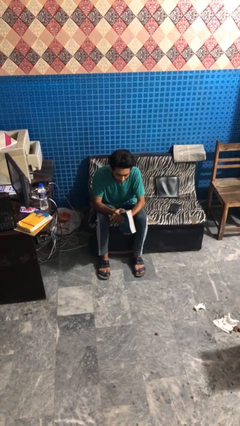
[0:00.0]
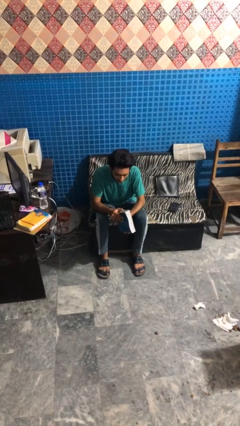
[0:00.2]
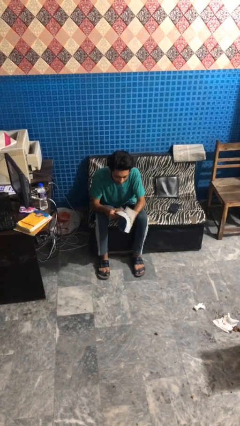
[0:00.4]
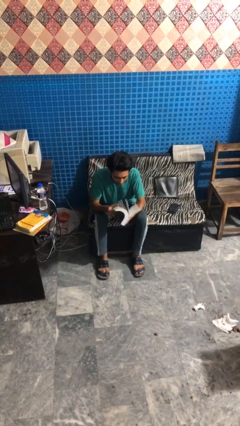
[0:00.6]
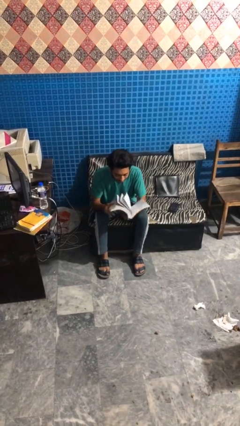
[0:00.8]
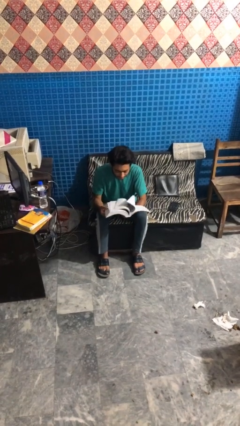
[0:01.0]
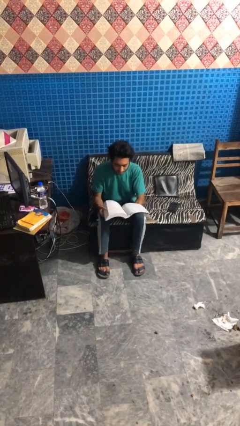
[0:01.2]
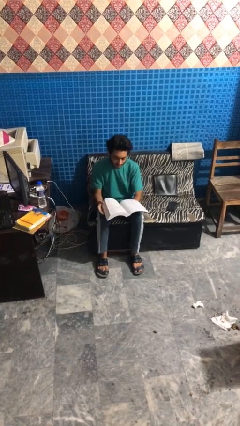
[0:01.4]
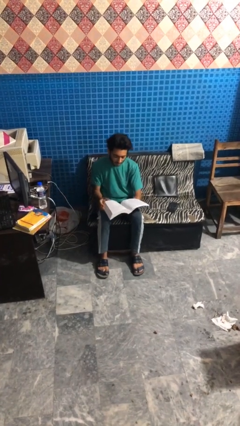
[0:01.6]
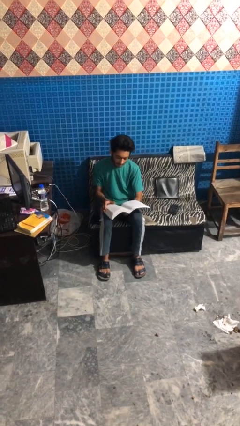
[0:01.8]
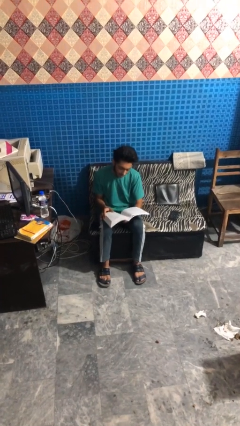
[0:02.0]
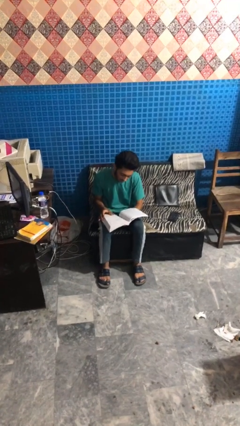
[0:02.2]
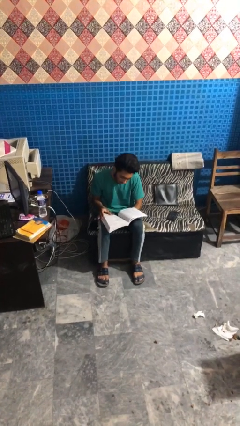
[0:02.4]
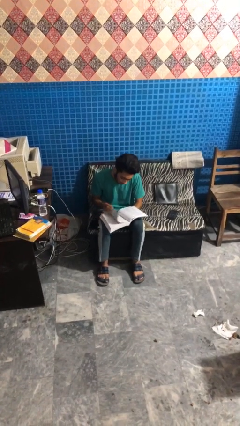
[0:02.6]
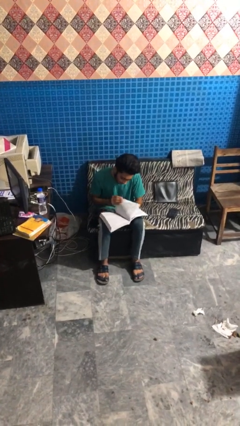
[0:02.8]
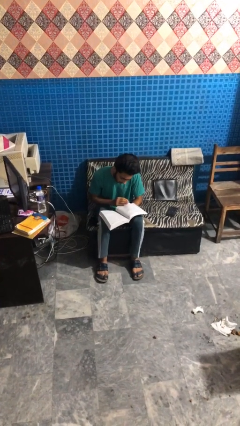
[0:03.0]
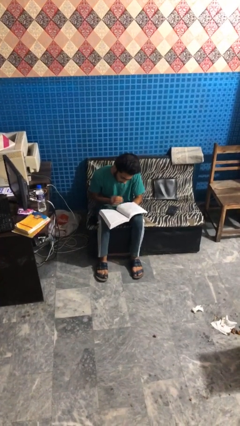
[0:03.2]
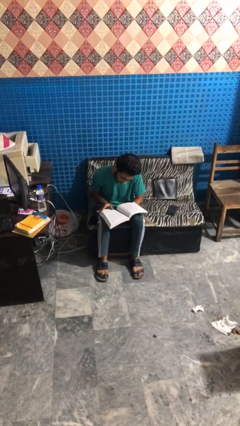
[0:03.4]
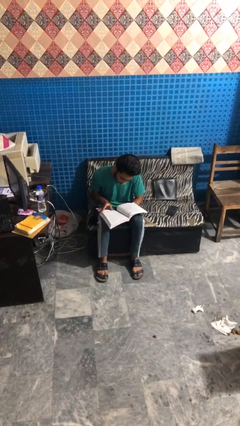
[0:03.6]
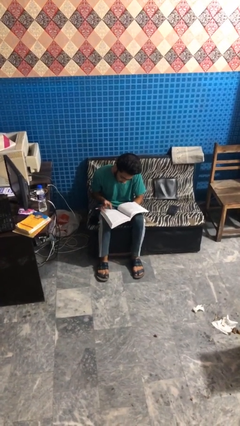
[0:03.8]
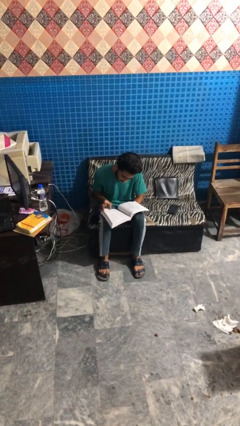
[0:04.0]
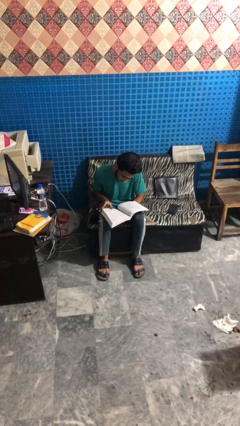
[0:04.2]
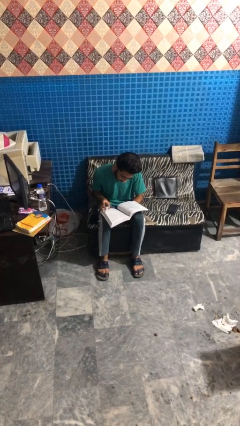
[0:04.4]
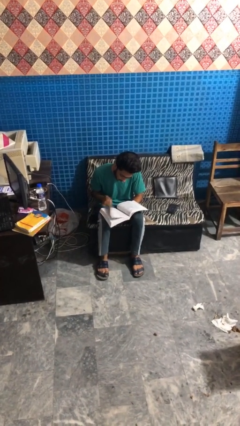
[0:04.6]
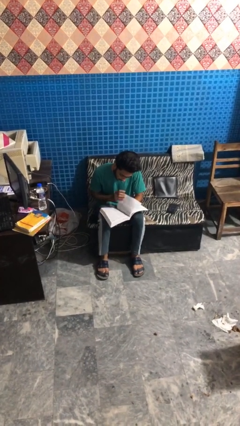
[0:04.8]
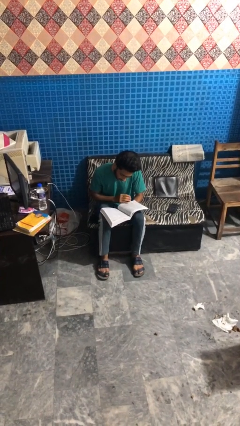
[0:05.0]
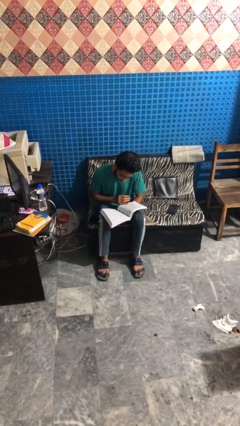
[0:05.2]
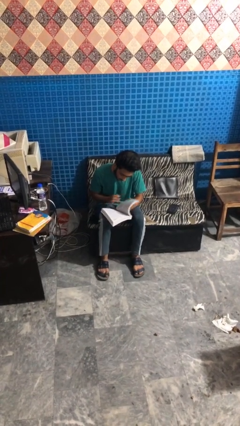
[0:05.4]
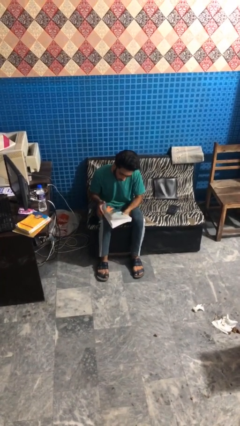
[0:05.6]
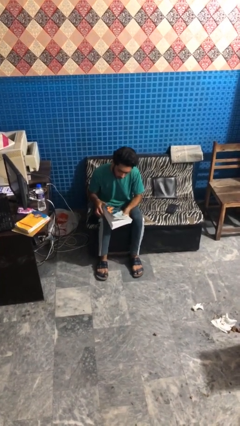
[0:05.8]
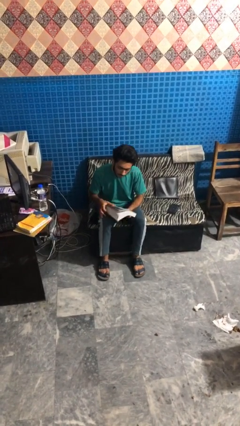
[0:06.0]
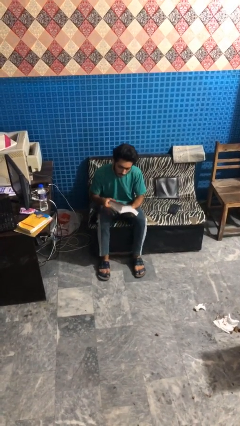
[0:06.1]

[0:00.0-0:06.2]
person reads book

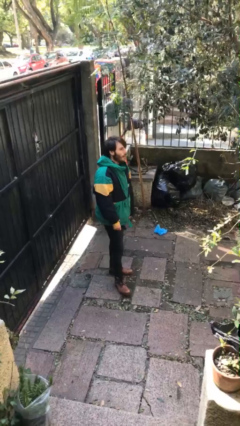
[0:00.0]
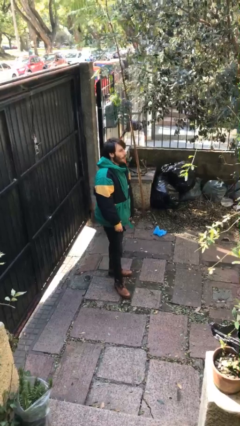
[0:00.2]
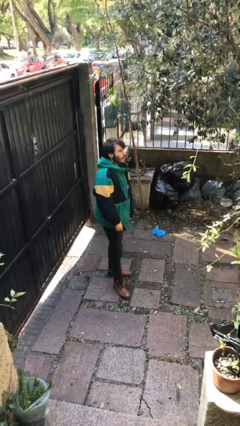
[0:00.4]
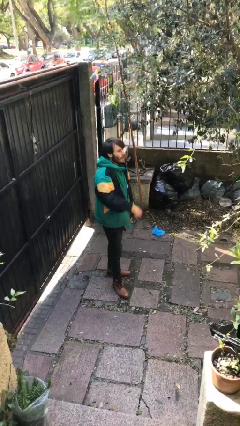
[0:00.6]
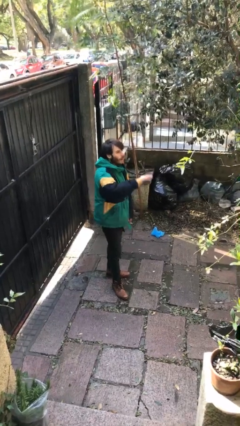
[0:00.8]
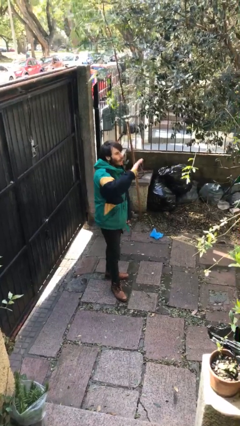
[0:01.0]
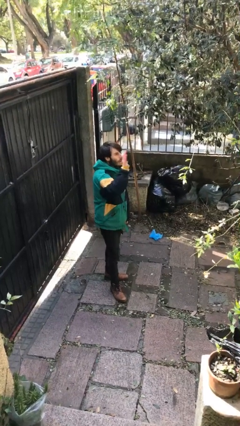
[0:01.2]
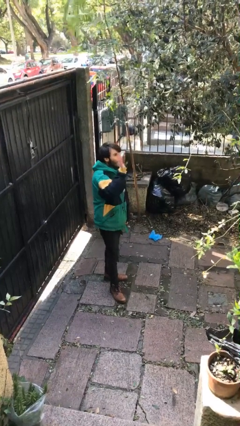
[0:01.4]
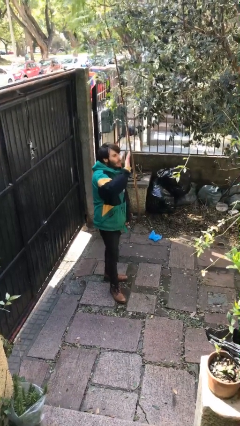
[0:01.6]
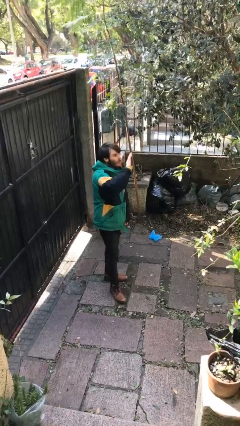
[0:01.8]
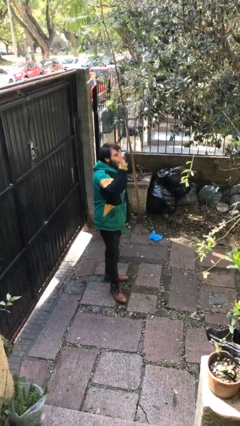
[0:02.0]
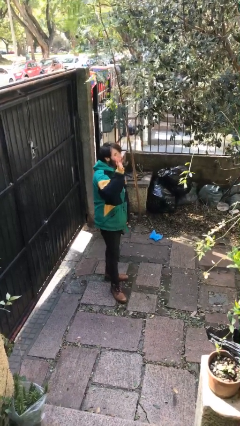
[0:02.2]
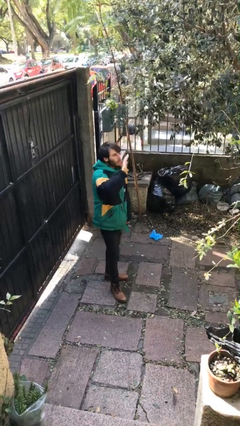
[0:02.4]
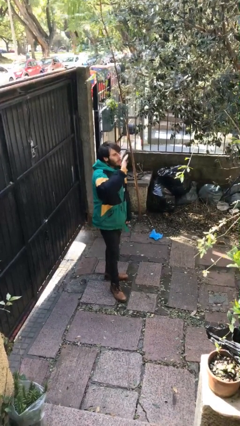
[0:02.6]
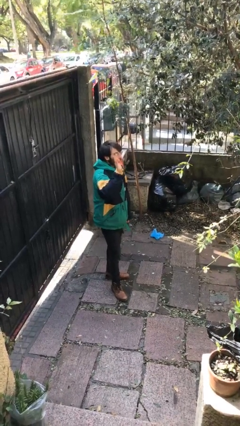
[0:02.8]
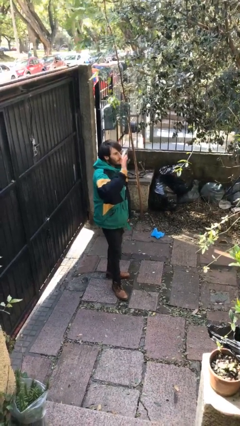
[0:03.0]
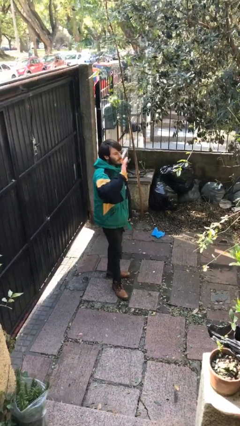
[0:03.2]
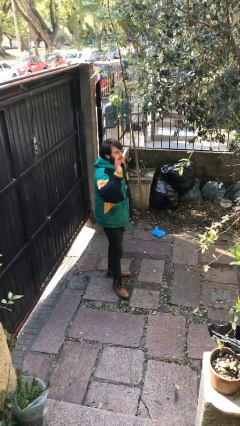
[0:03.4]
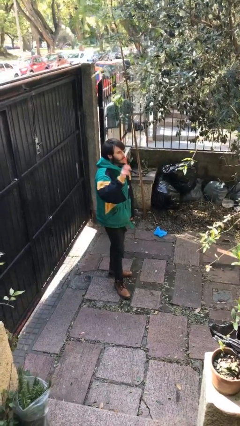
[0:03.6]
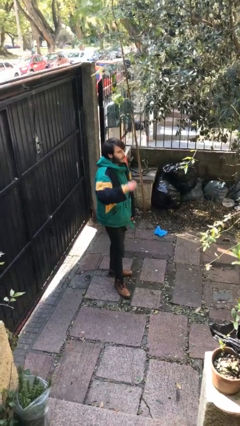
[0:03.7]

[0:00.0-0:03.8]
person waves at person

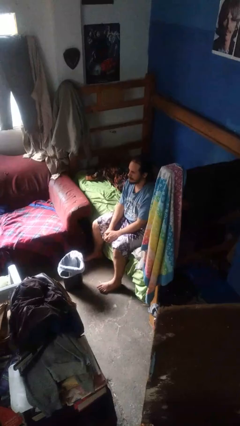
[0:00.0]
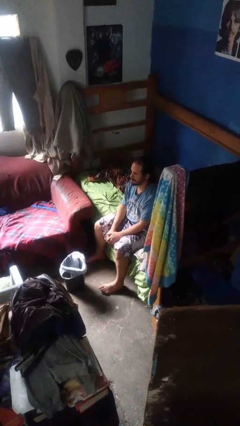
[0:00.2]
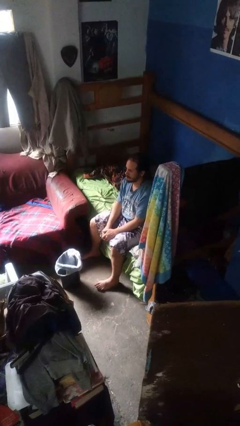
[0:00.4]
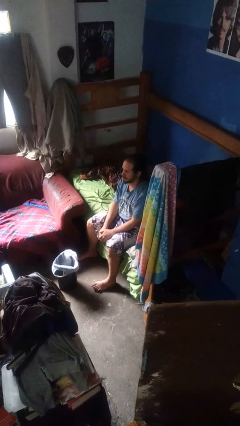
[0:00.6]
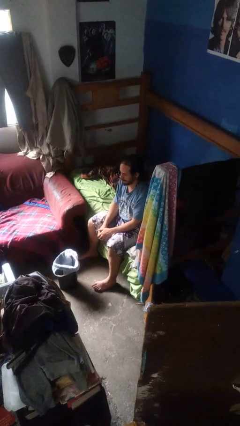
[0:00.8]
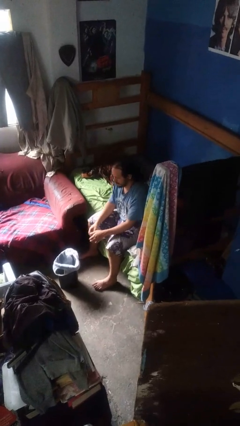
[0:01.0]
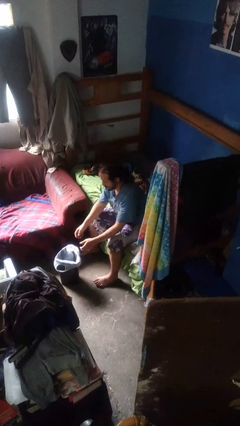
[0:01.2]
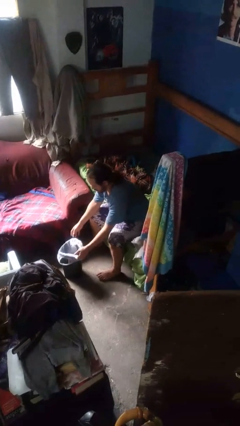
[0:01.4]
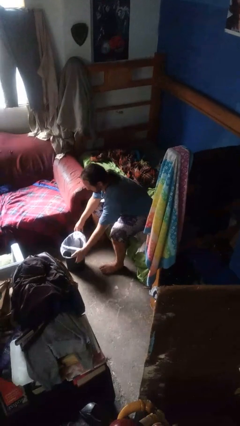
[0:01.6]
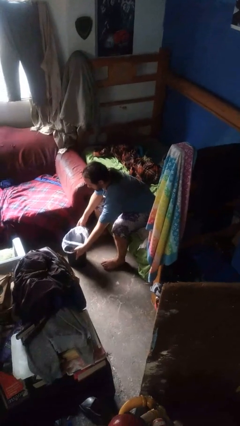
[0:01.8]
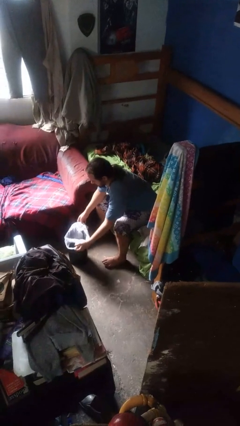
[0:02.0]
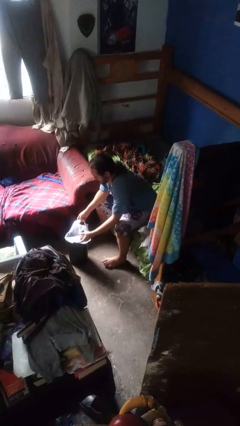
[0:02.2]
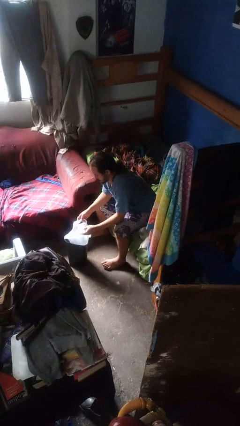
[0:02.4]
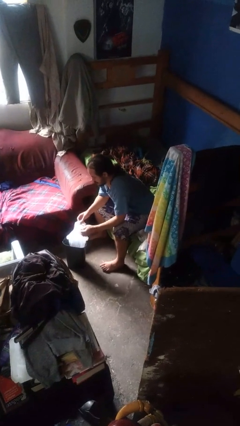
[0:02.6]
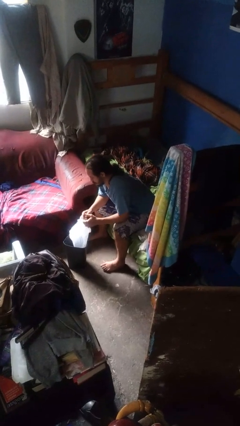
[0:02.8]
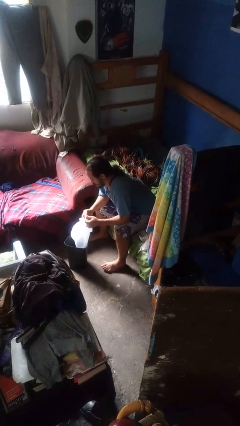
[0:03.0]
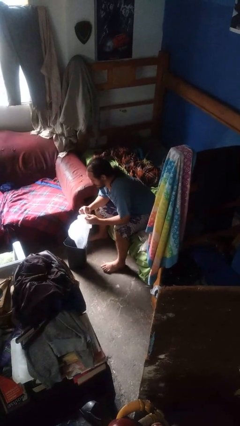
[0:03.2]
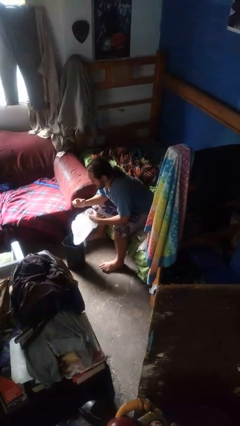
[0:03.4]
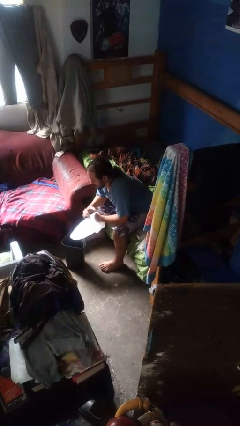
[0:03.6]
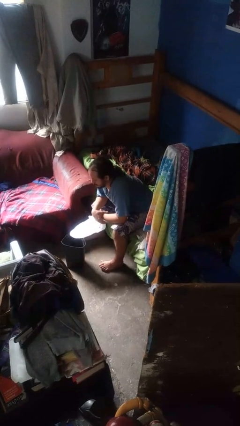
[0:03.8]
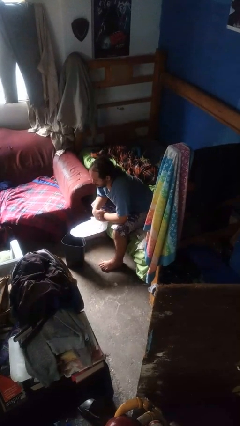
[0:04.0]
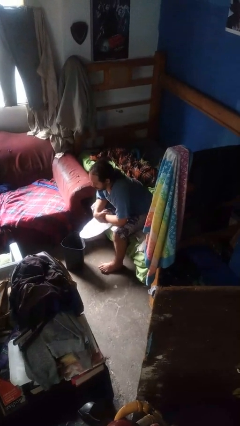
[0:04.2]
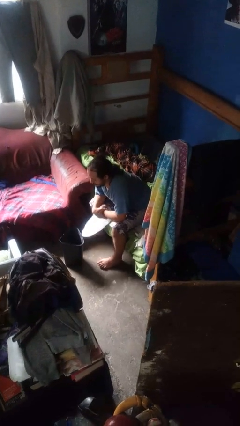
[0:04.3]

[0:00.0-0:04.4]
person removes trashbag from trashcan

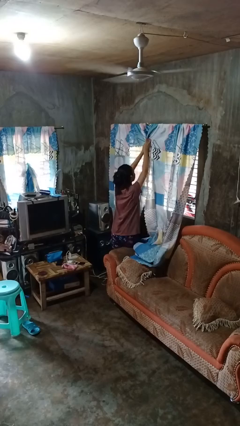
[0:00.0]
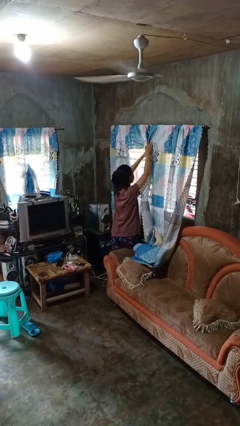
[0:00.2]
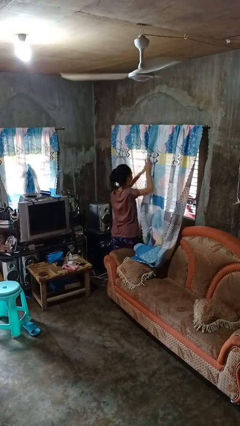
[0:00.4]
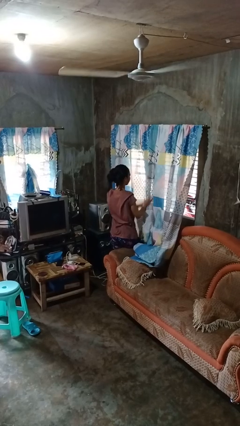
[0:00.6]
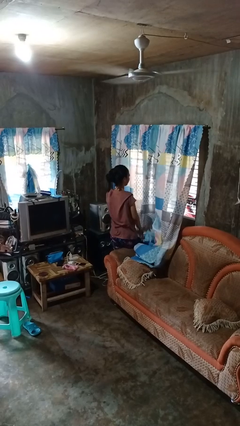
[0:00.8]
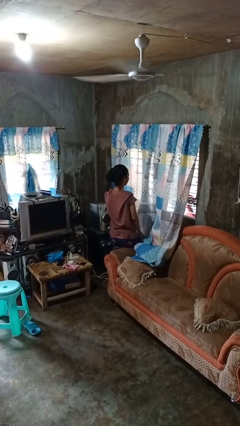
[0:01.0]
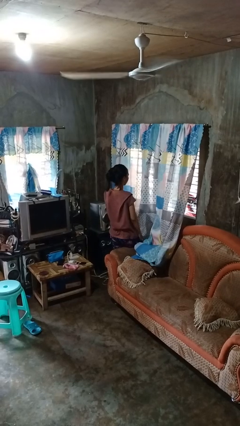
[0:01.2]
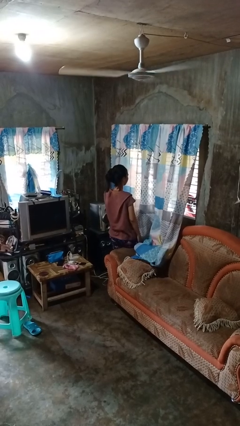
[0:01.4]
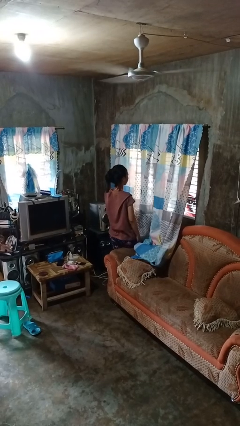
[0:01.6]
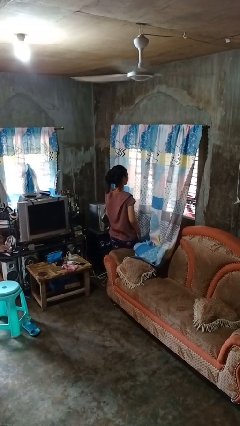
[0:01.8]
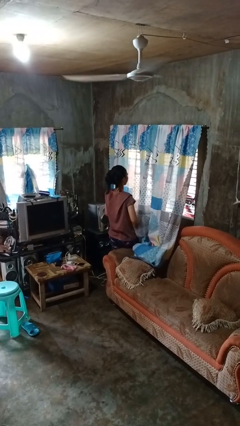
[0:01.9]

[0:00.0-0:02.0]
person closes curtains

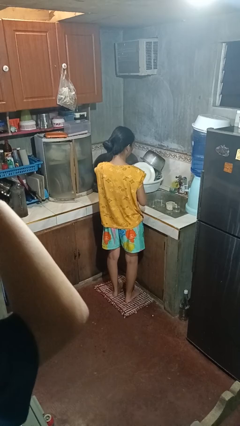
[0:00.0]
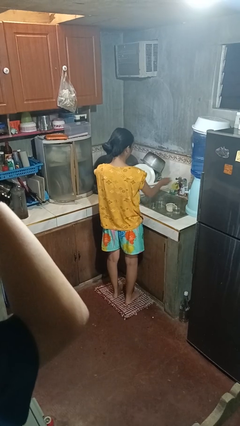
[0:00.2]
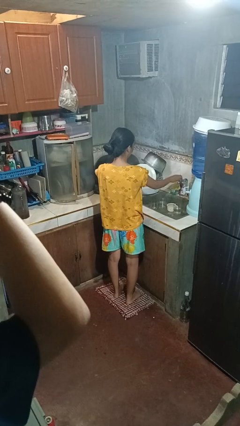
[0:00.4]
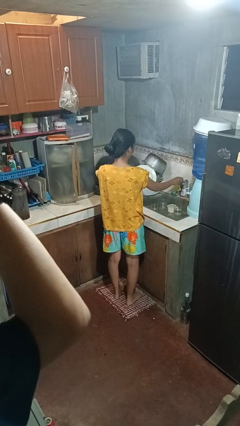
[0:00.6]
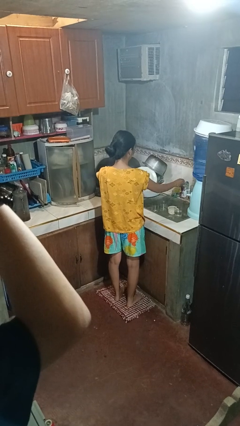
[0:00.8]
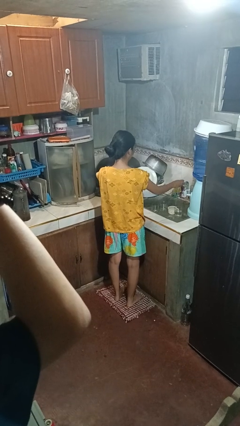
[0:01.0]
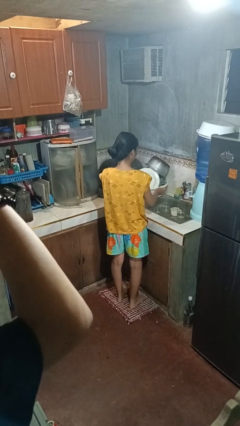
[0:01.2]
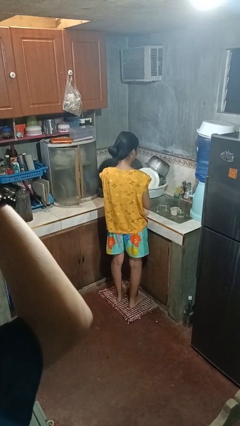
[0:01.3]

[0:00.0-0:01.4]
person turns on faucet

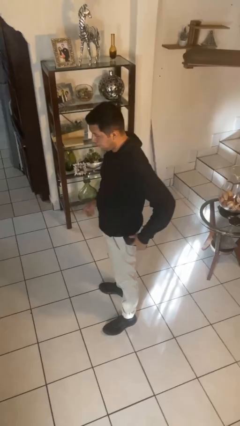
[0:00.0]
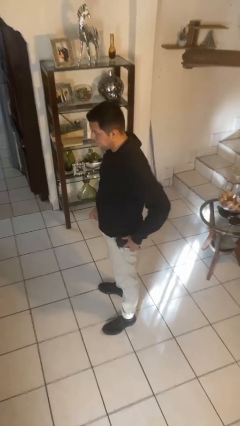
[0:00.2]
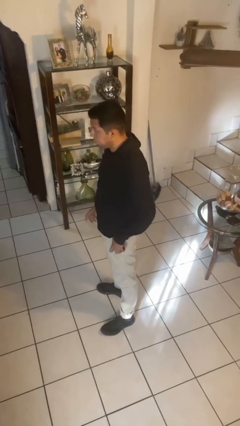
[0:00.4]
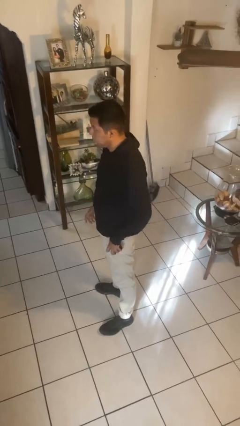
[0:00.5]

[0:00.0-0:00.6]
person puts phone into pocket
